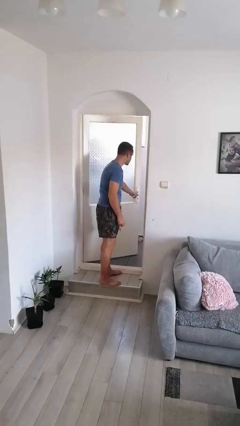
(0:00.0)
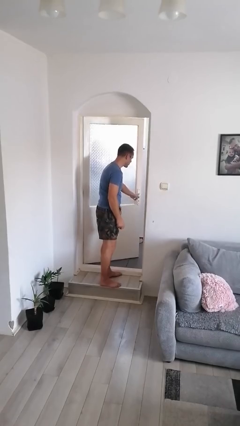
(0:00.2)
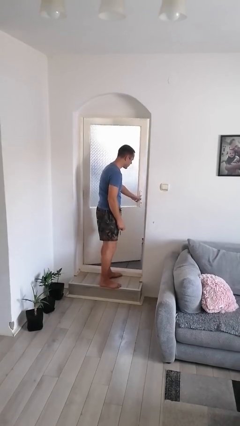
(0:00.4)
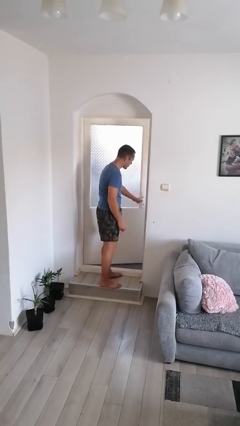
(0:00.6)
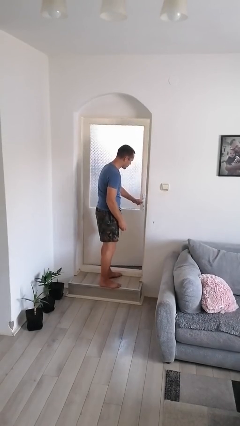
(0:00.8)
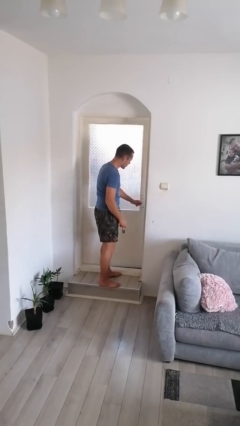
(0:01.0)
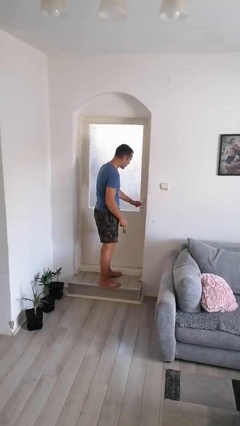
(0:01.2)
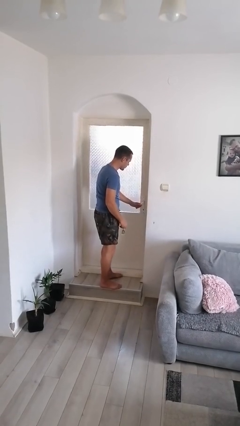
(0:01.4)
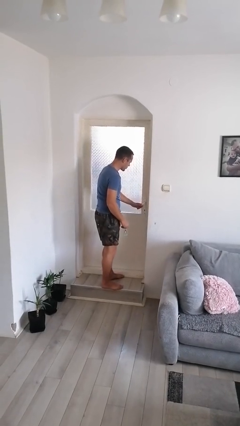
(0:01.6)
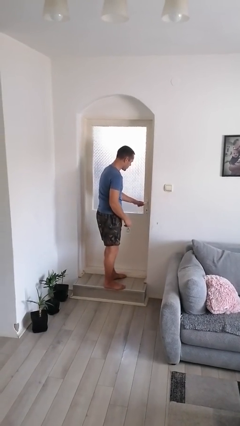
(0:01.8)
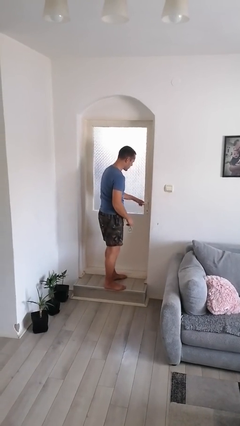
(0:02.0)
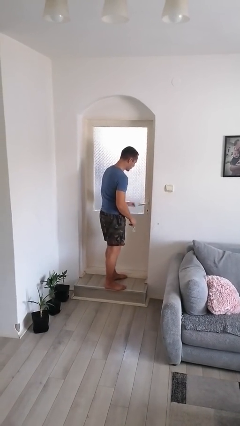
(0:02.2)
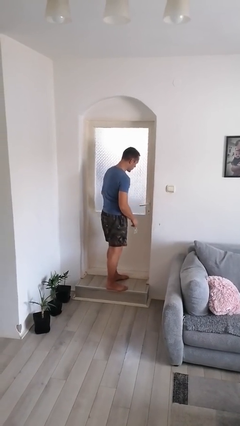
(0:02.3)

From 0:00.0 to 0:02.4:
person closes facility door

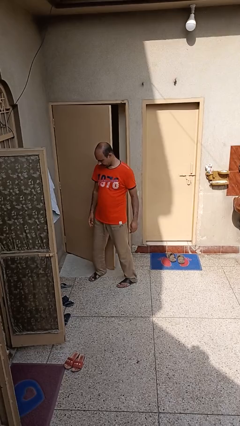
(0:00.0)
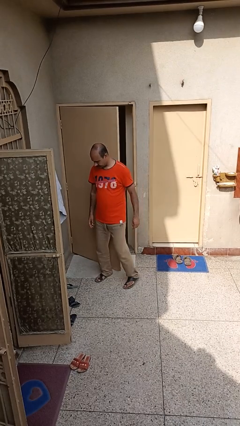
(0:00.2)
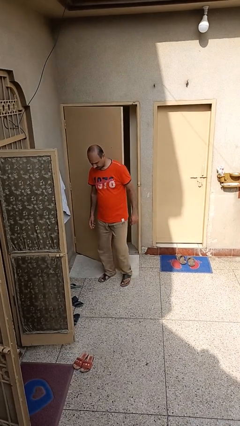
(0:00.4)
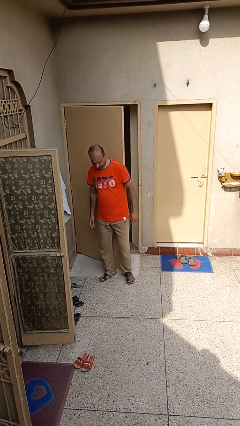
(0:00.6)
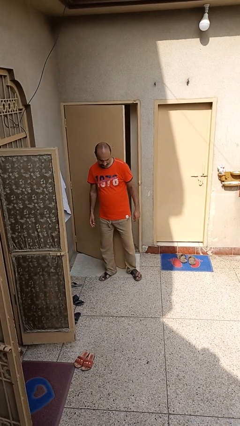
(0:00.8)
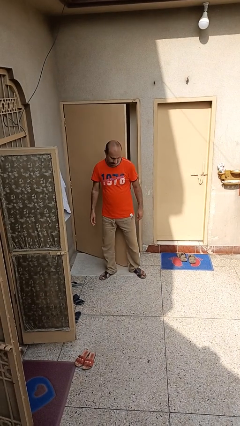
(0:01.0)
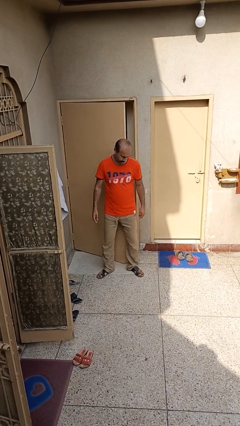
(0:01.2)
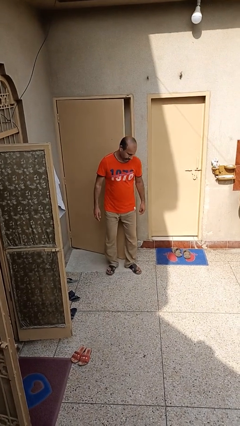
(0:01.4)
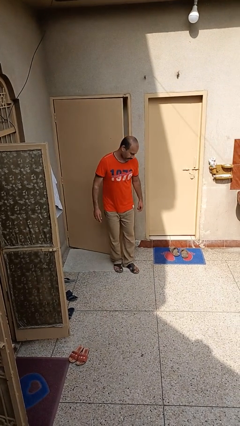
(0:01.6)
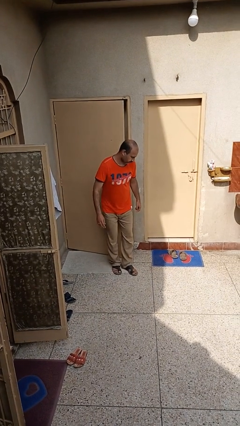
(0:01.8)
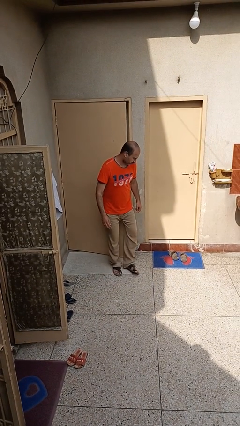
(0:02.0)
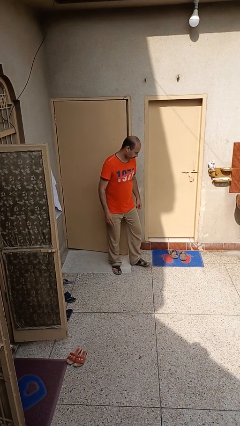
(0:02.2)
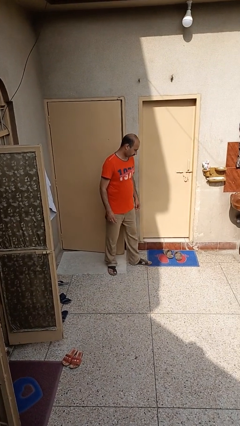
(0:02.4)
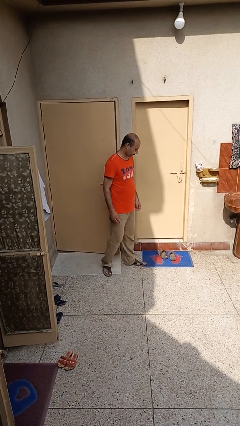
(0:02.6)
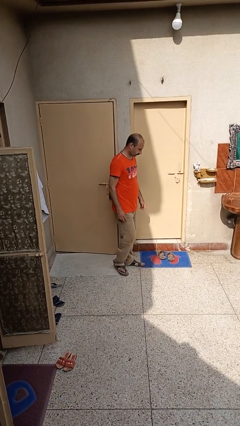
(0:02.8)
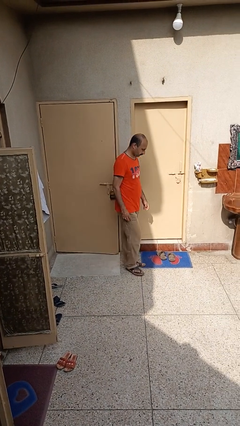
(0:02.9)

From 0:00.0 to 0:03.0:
person closes door with hip

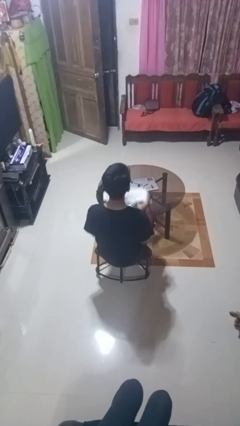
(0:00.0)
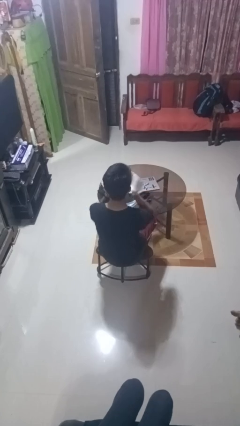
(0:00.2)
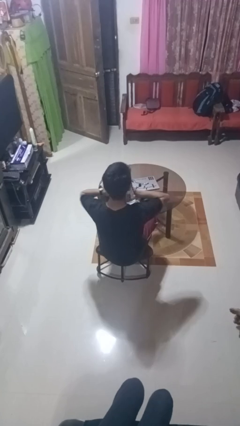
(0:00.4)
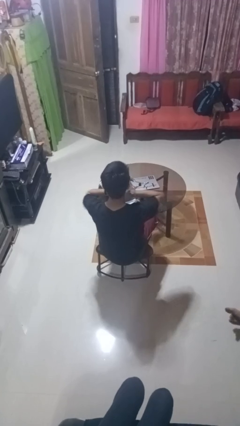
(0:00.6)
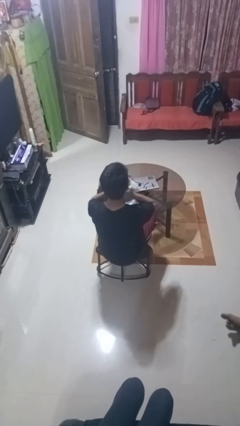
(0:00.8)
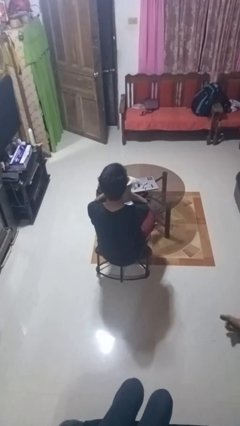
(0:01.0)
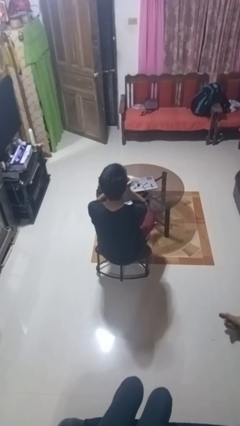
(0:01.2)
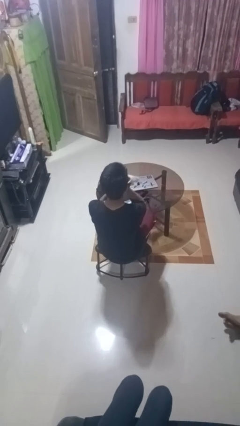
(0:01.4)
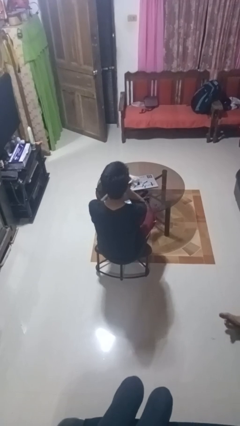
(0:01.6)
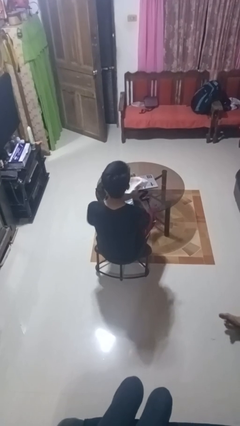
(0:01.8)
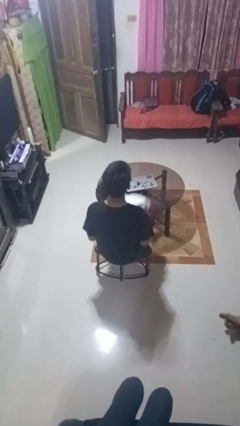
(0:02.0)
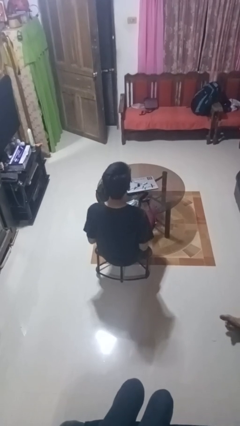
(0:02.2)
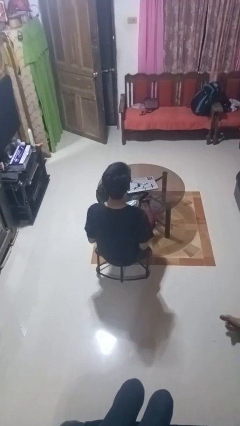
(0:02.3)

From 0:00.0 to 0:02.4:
person wipes mouth with napkin

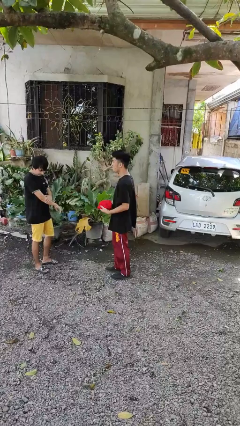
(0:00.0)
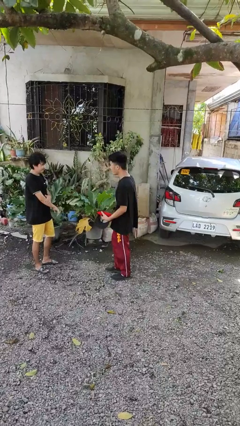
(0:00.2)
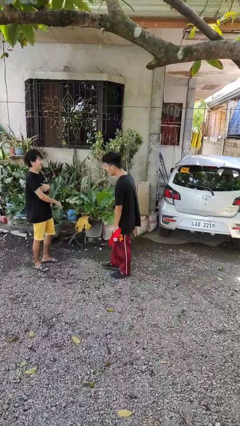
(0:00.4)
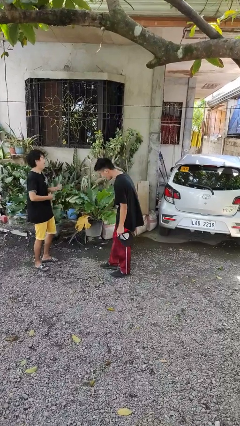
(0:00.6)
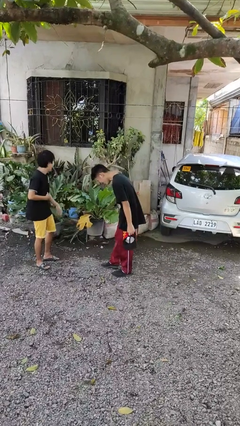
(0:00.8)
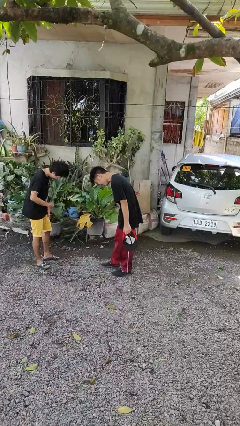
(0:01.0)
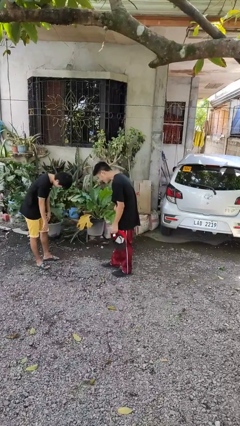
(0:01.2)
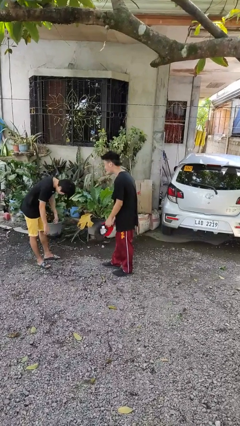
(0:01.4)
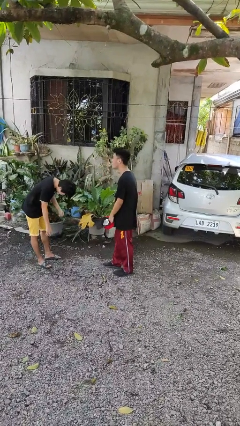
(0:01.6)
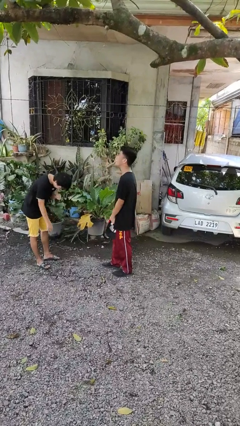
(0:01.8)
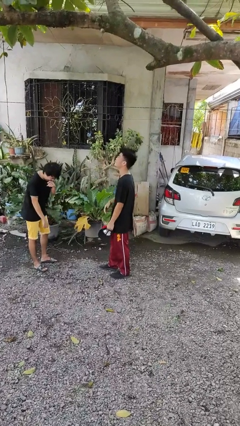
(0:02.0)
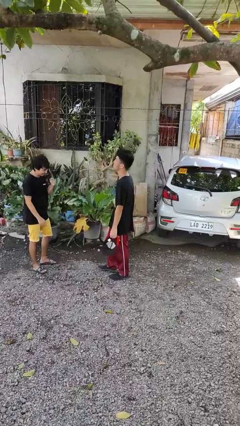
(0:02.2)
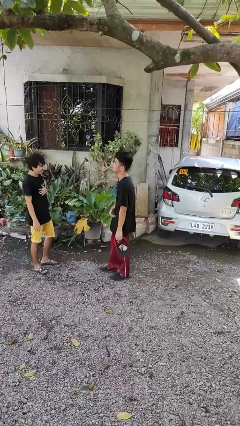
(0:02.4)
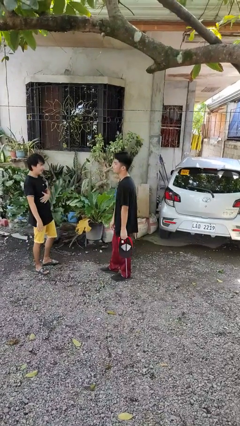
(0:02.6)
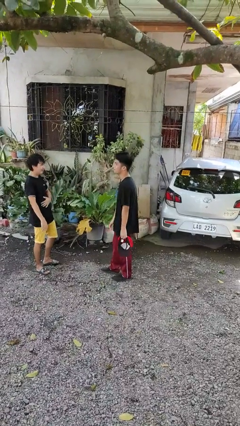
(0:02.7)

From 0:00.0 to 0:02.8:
person laughs with person

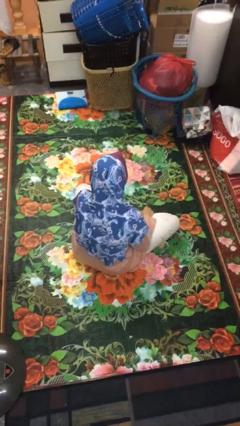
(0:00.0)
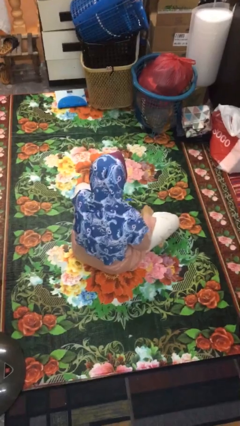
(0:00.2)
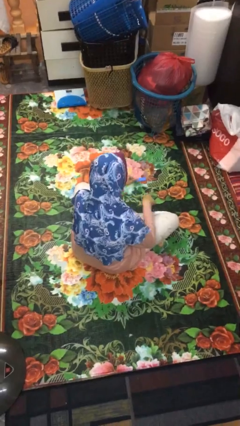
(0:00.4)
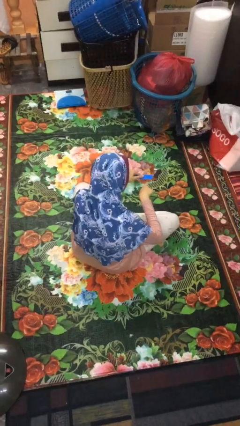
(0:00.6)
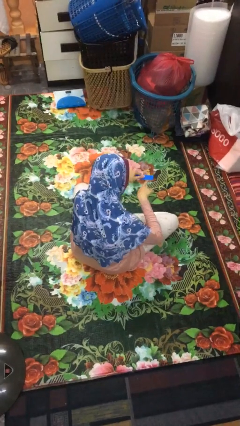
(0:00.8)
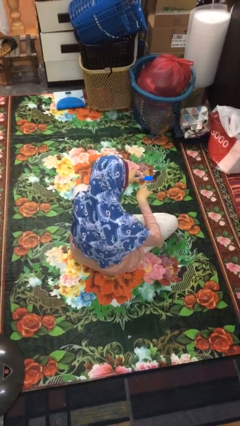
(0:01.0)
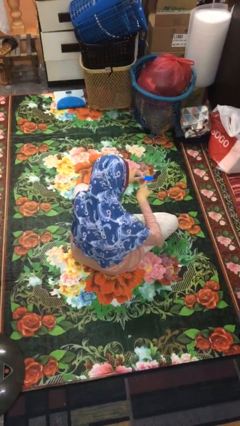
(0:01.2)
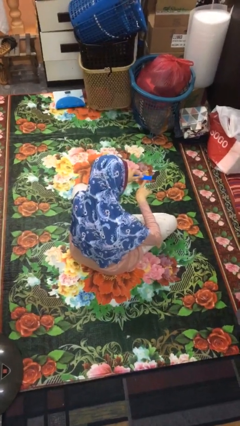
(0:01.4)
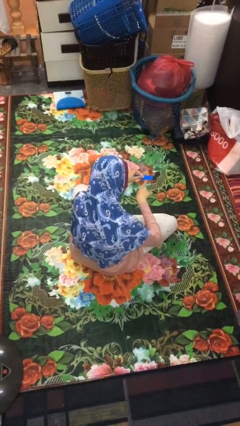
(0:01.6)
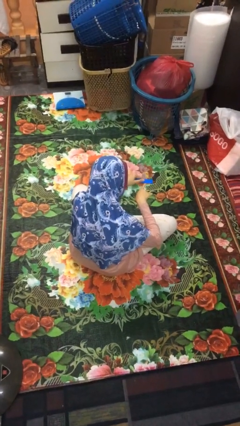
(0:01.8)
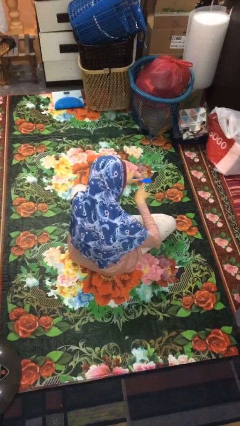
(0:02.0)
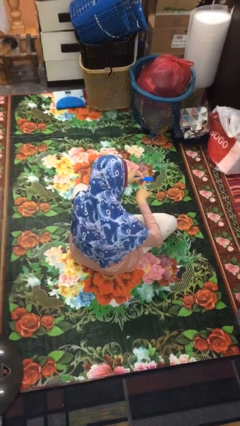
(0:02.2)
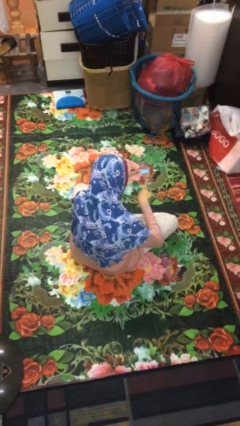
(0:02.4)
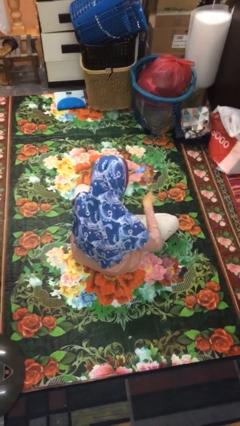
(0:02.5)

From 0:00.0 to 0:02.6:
person files fingernails

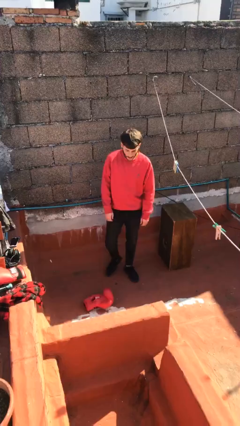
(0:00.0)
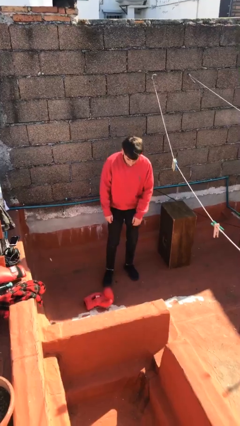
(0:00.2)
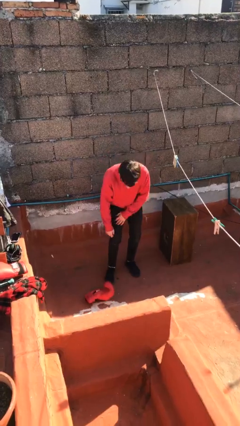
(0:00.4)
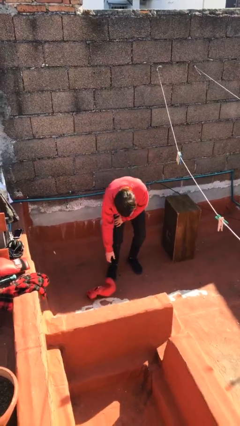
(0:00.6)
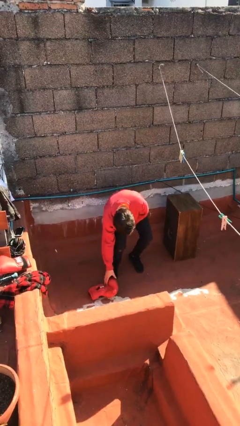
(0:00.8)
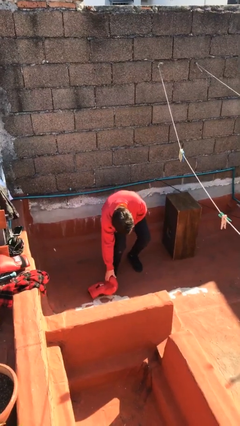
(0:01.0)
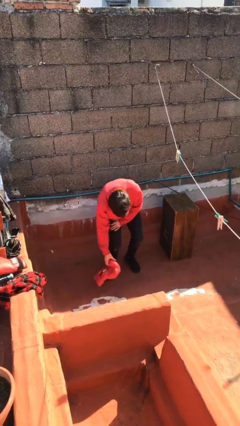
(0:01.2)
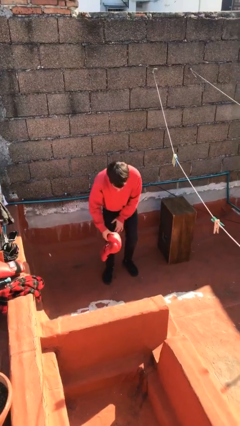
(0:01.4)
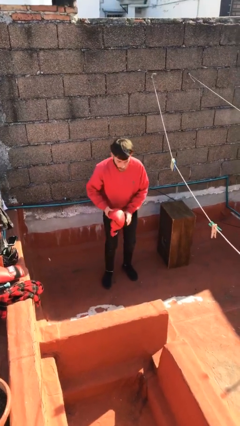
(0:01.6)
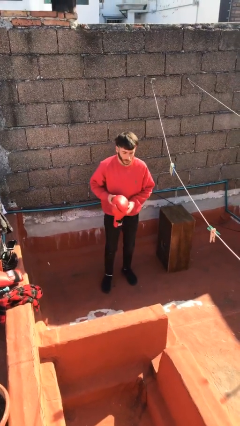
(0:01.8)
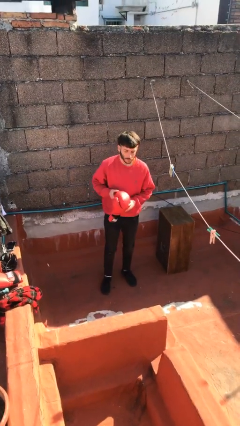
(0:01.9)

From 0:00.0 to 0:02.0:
person picks up object from floor

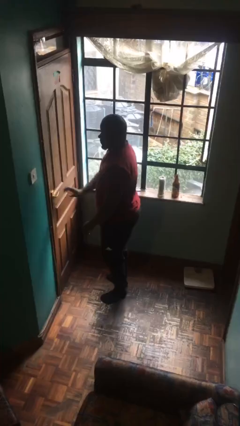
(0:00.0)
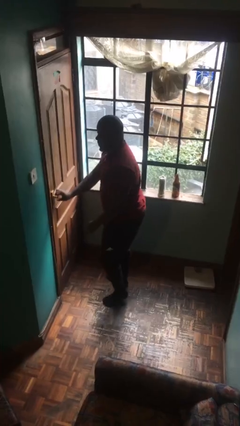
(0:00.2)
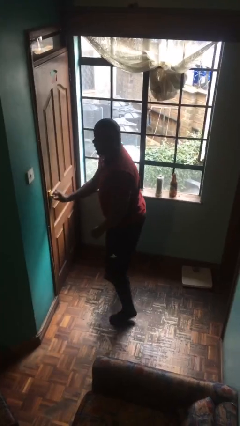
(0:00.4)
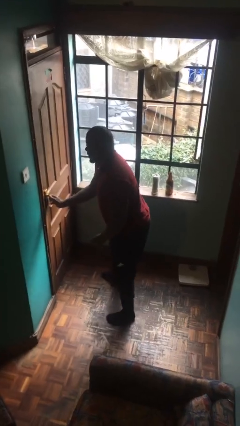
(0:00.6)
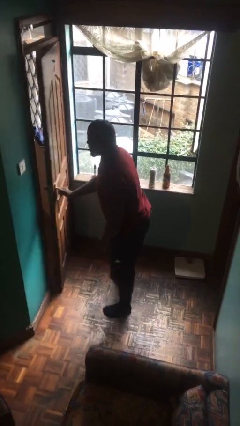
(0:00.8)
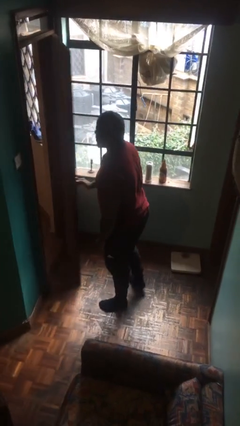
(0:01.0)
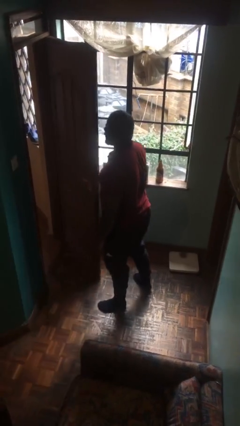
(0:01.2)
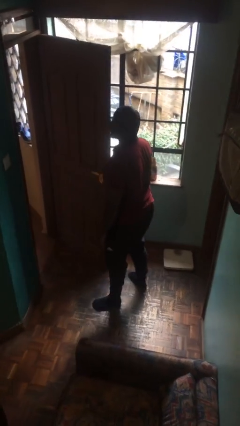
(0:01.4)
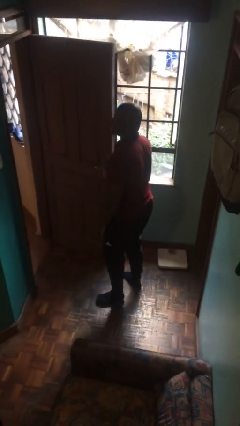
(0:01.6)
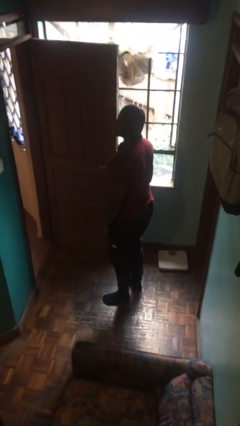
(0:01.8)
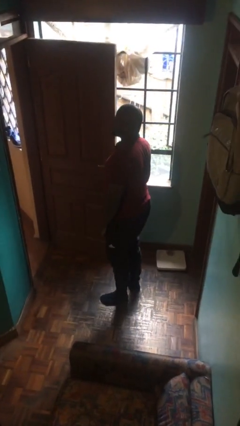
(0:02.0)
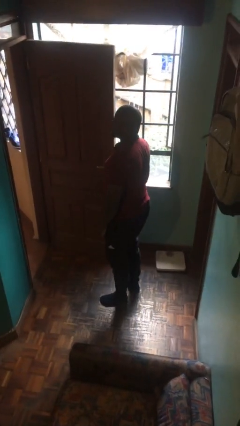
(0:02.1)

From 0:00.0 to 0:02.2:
person opens facility door
